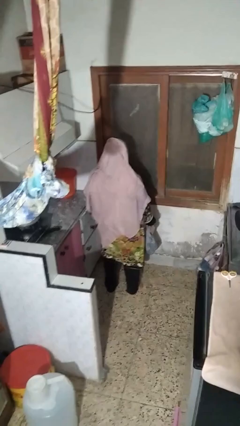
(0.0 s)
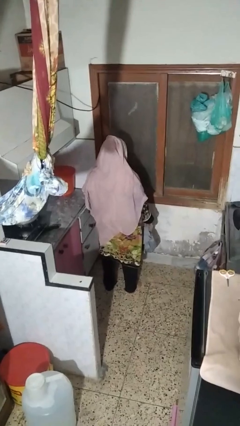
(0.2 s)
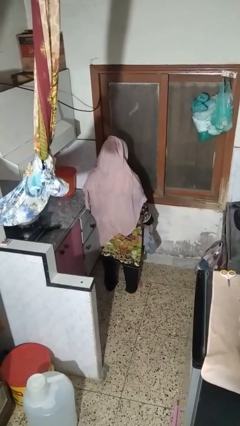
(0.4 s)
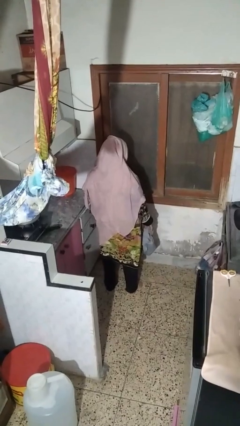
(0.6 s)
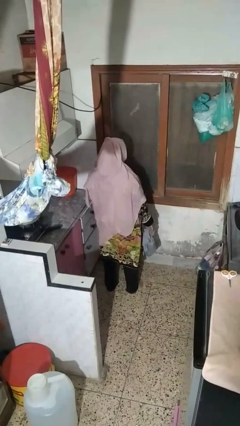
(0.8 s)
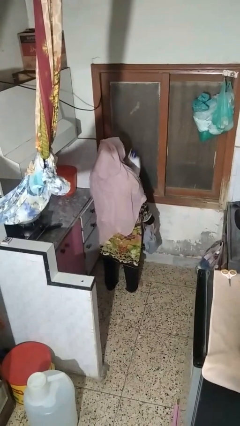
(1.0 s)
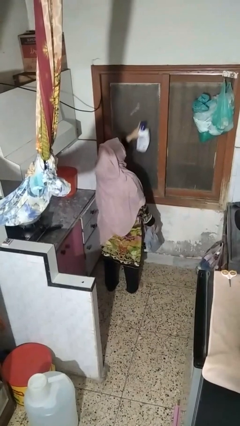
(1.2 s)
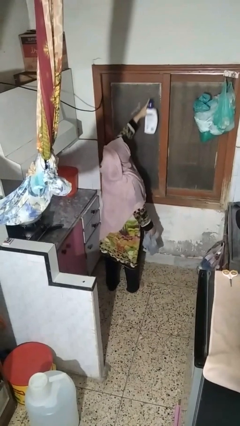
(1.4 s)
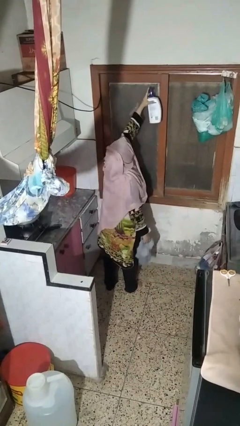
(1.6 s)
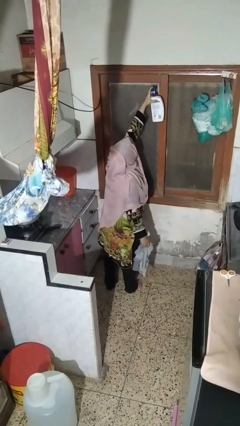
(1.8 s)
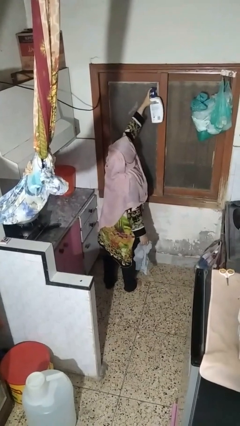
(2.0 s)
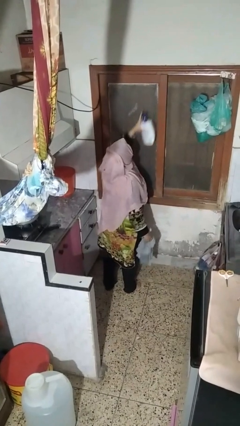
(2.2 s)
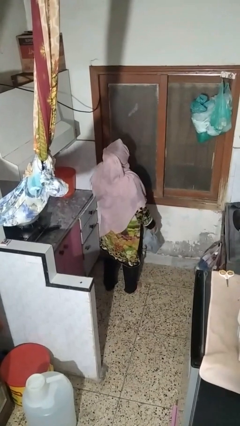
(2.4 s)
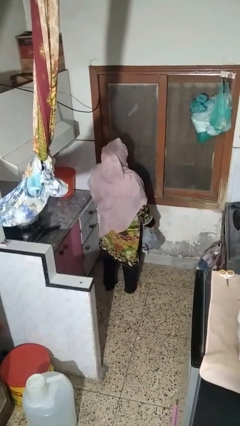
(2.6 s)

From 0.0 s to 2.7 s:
person sprays from bottle

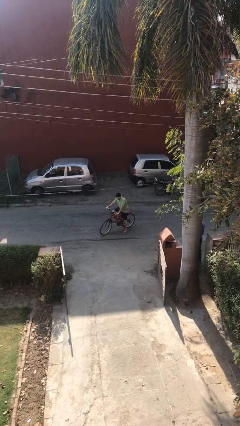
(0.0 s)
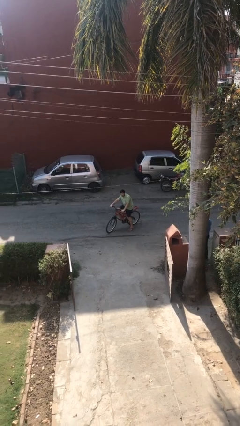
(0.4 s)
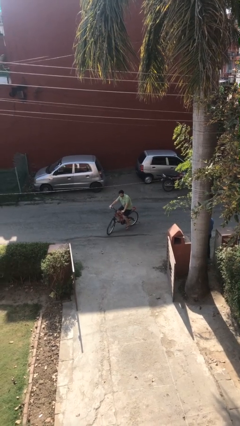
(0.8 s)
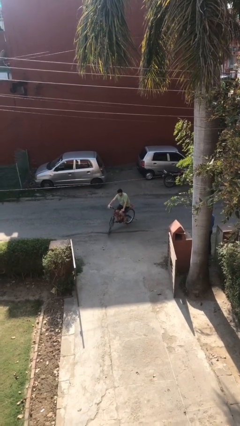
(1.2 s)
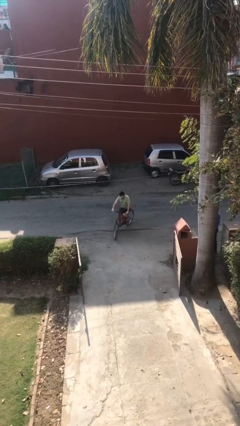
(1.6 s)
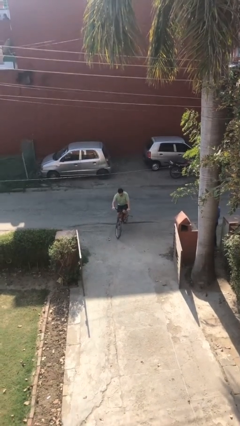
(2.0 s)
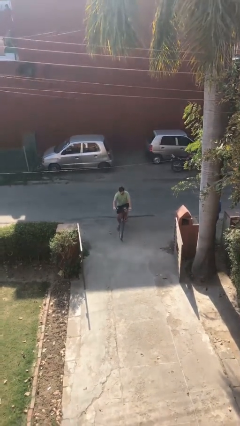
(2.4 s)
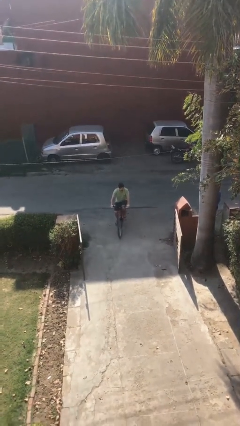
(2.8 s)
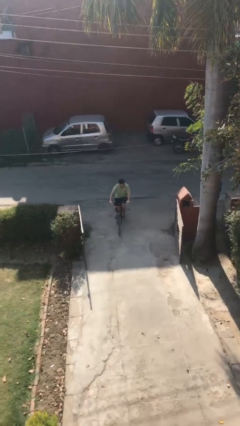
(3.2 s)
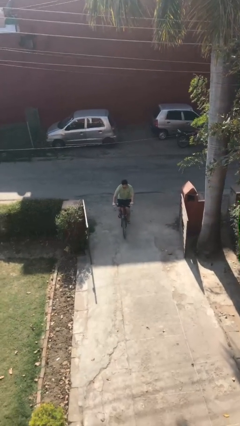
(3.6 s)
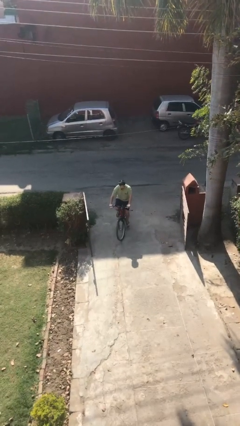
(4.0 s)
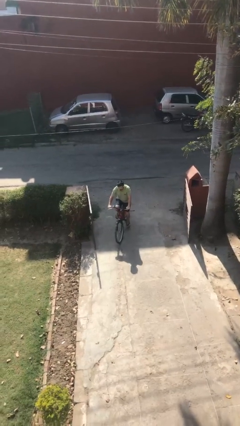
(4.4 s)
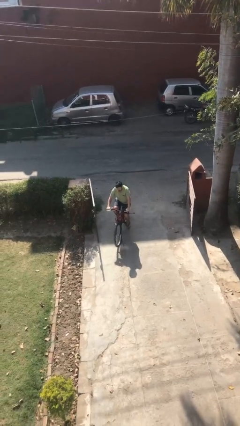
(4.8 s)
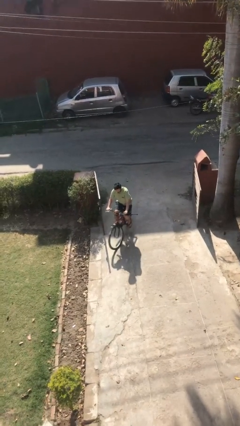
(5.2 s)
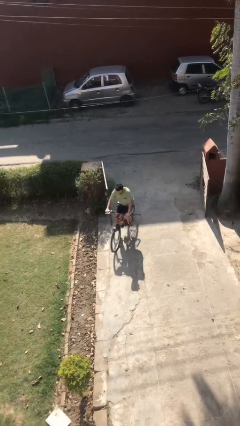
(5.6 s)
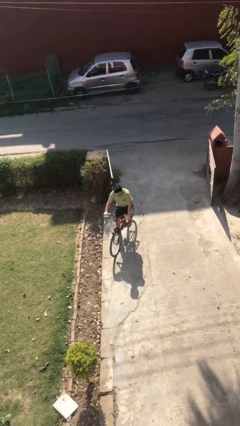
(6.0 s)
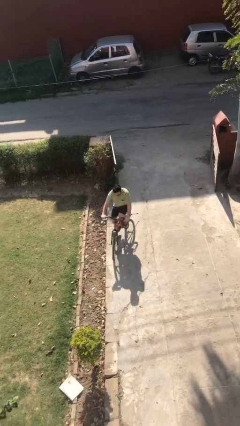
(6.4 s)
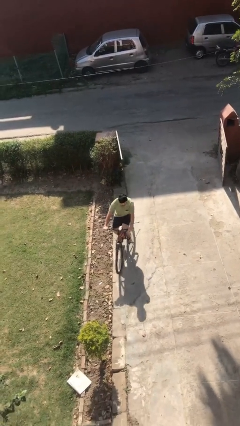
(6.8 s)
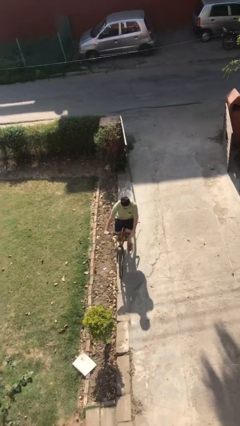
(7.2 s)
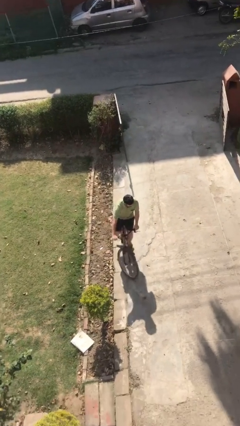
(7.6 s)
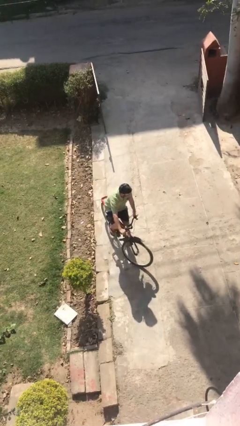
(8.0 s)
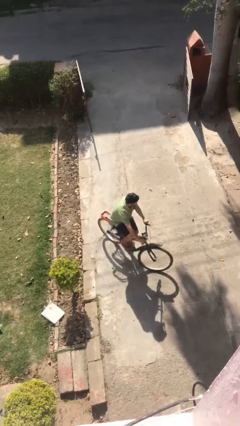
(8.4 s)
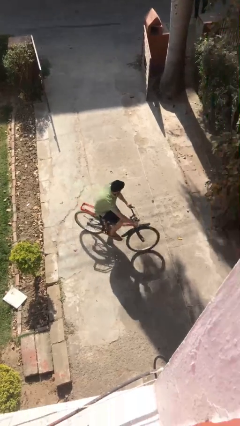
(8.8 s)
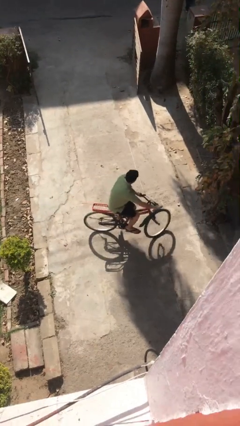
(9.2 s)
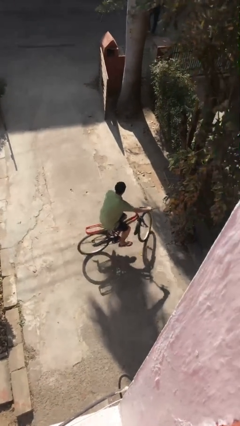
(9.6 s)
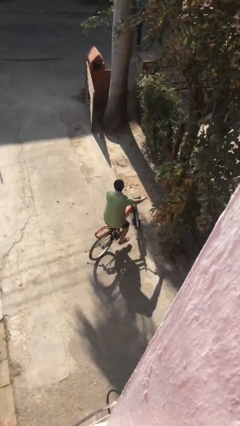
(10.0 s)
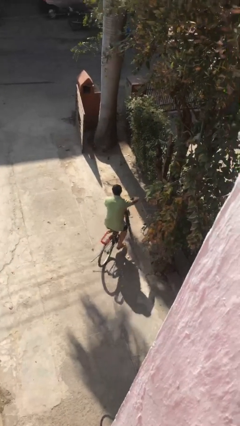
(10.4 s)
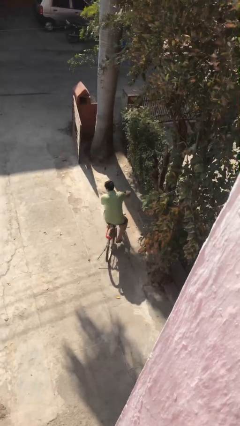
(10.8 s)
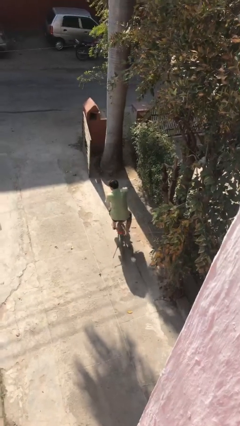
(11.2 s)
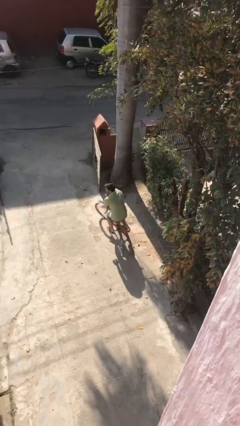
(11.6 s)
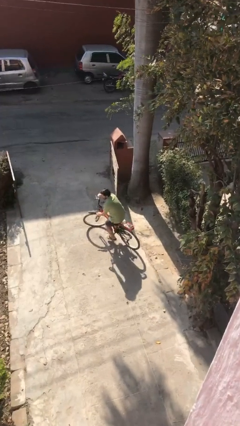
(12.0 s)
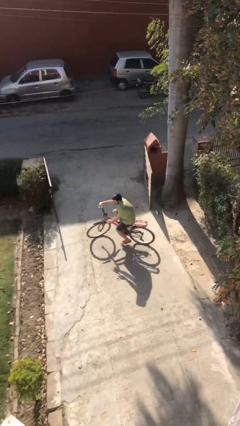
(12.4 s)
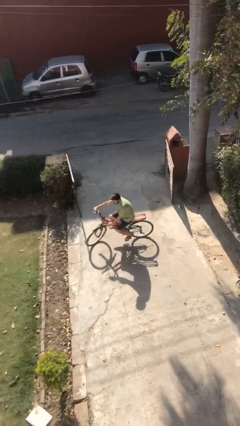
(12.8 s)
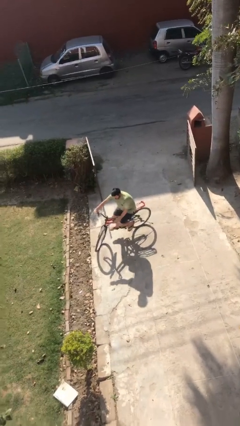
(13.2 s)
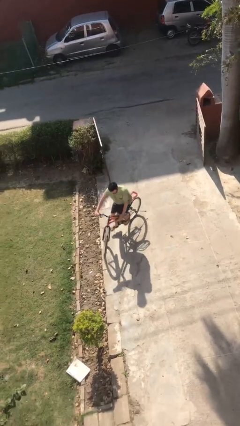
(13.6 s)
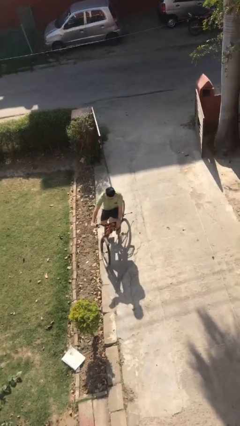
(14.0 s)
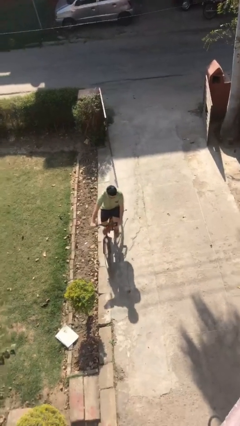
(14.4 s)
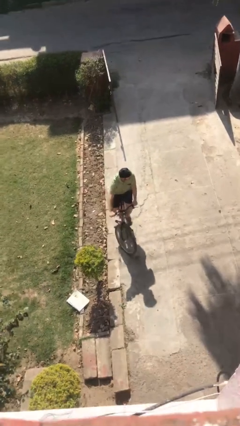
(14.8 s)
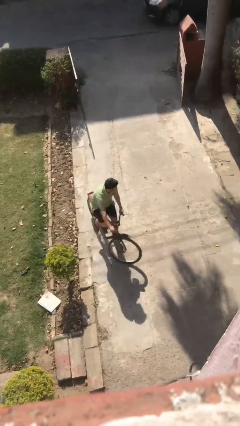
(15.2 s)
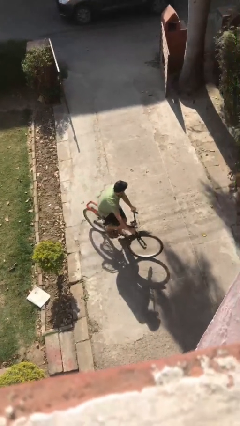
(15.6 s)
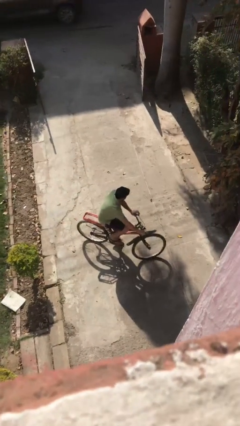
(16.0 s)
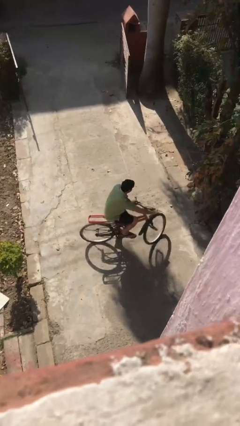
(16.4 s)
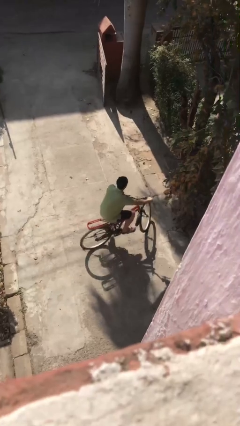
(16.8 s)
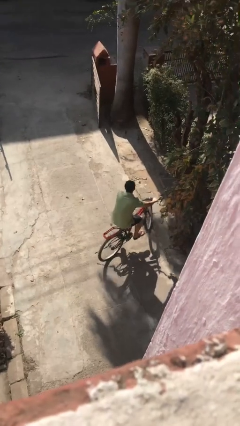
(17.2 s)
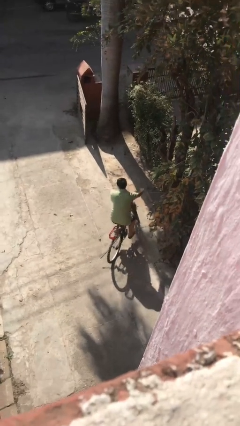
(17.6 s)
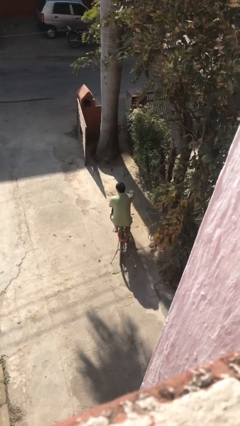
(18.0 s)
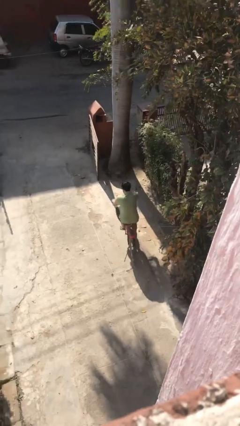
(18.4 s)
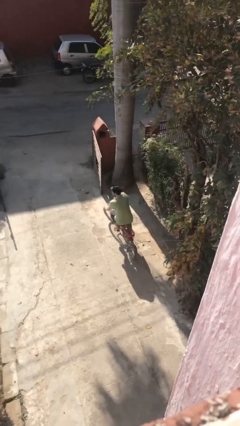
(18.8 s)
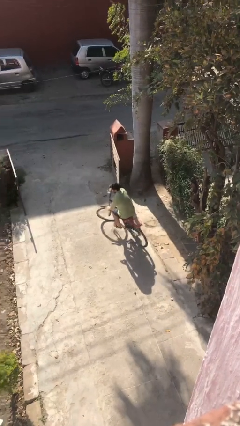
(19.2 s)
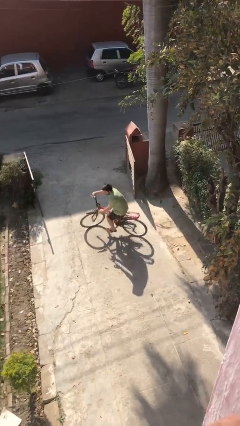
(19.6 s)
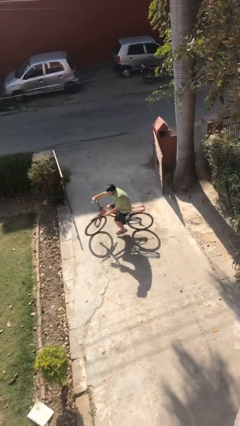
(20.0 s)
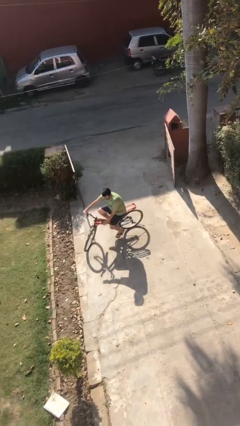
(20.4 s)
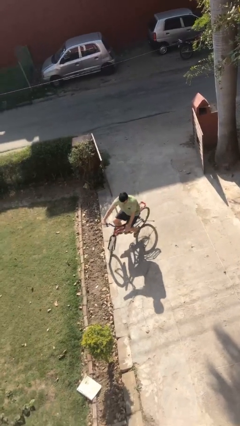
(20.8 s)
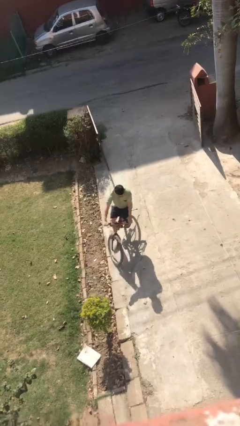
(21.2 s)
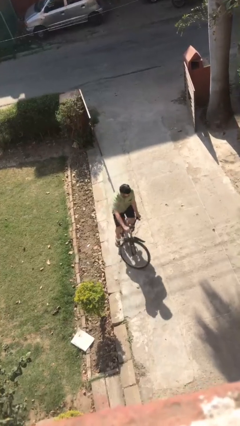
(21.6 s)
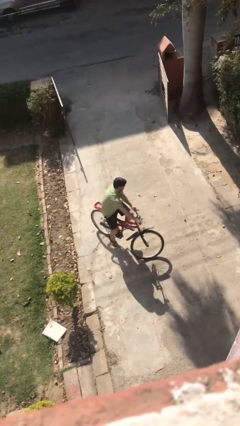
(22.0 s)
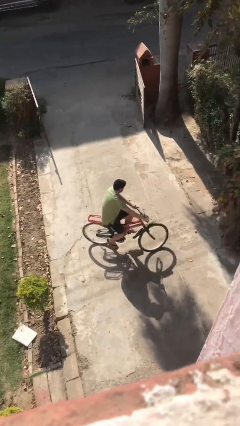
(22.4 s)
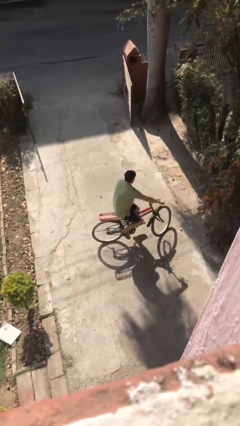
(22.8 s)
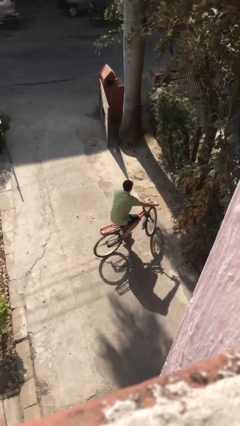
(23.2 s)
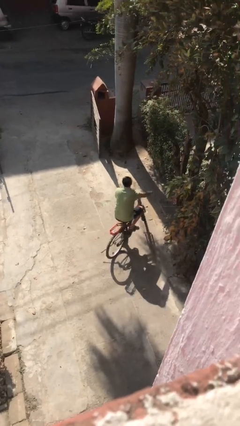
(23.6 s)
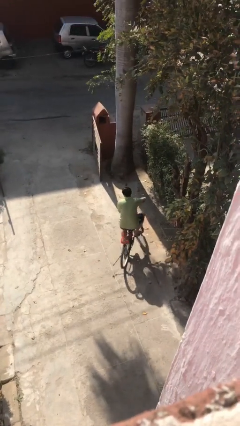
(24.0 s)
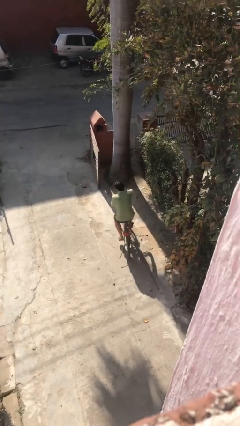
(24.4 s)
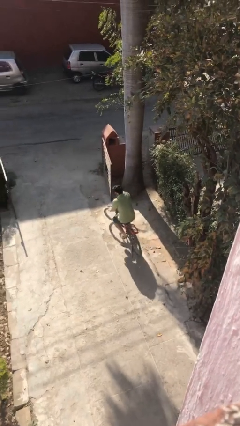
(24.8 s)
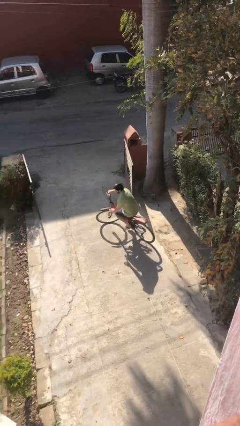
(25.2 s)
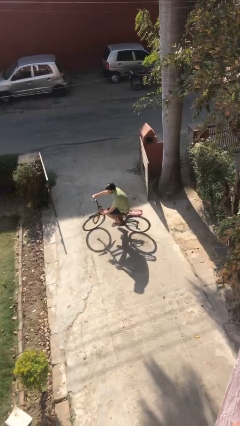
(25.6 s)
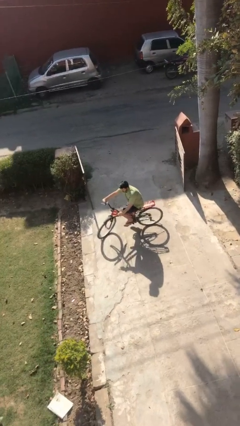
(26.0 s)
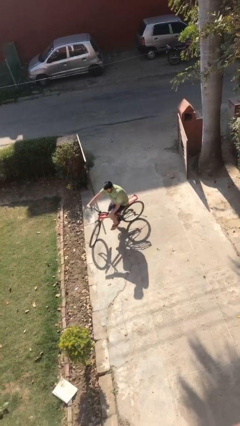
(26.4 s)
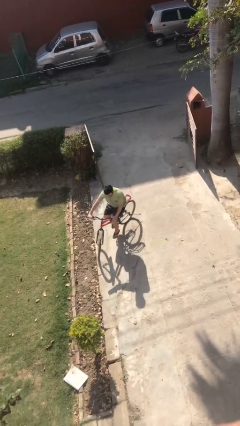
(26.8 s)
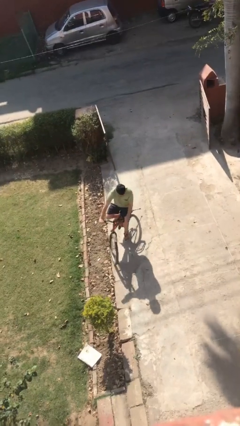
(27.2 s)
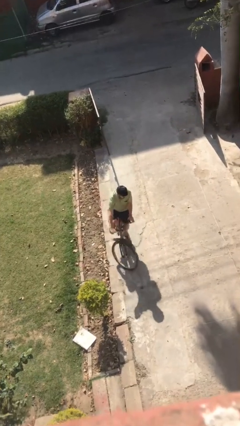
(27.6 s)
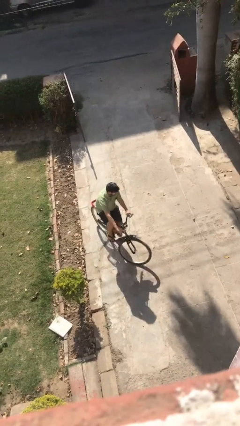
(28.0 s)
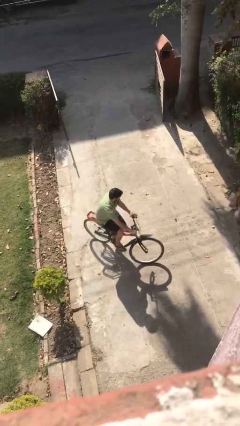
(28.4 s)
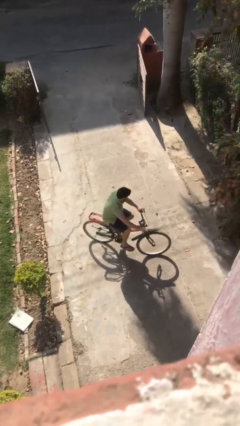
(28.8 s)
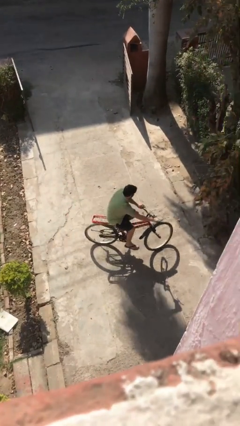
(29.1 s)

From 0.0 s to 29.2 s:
person rides bicycle

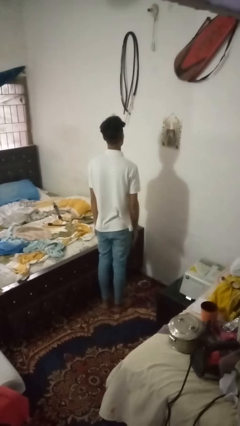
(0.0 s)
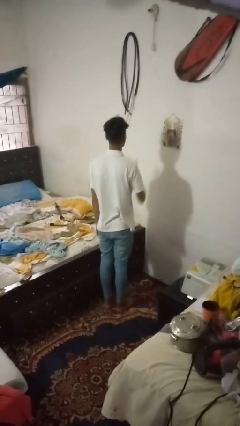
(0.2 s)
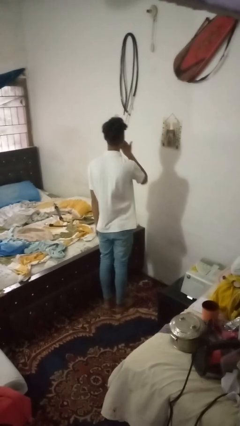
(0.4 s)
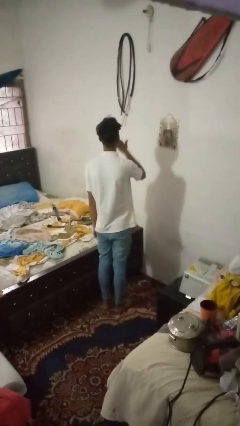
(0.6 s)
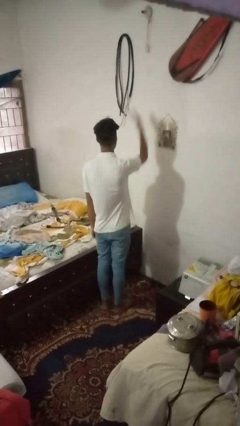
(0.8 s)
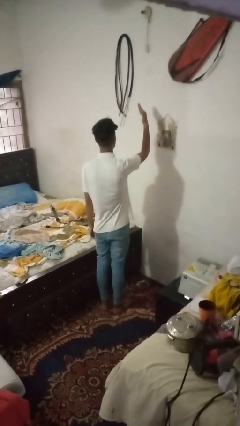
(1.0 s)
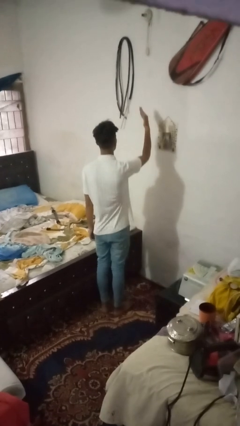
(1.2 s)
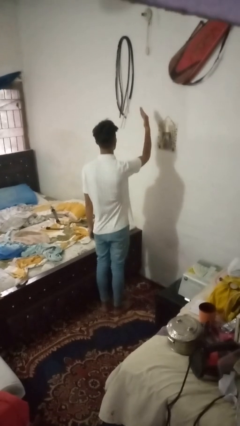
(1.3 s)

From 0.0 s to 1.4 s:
person gestures blow kiss
